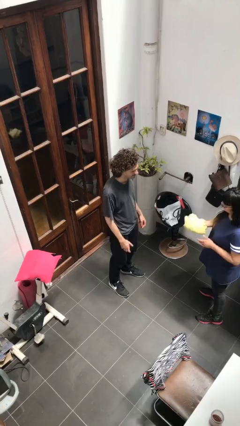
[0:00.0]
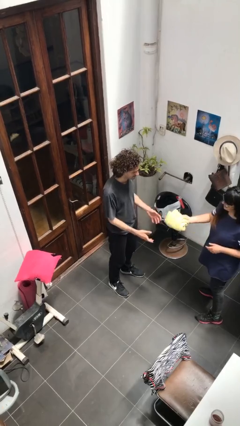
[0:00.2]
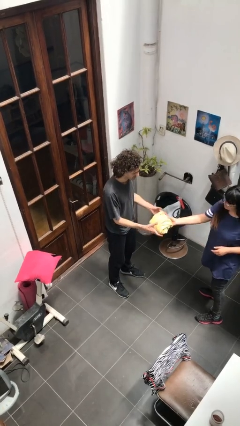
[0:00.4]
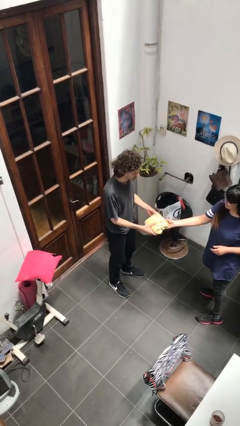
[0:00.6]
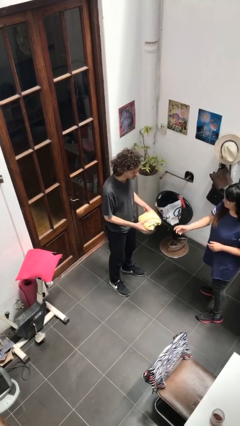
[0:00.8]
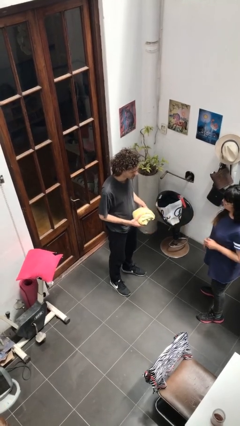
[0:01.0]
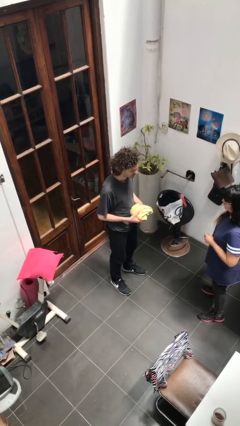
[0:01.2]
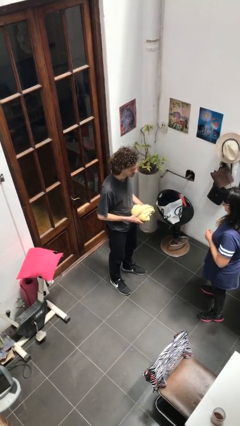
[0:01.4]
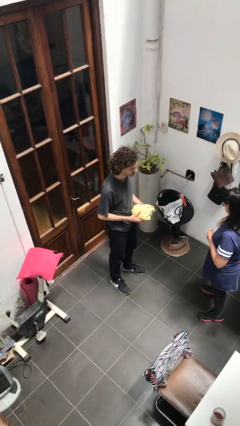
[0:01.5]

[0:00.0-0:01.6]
person transfers object to person

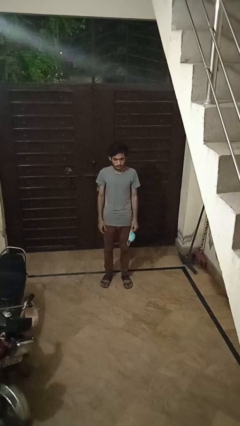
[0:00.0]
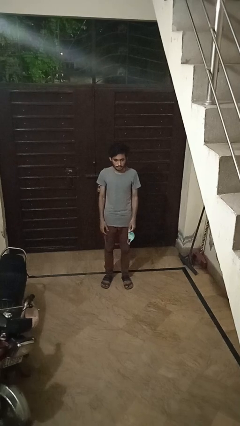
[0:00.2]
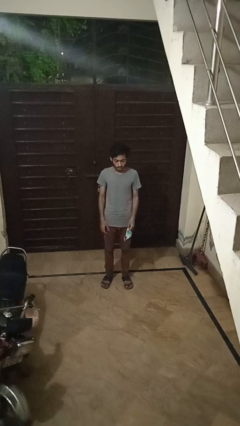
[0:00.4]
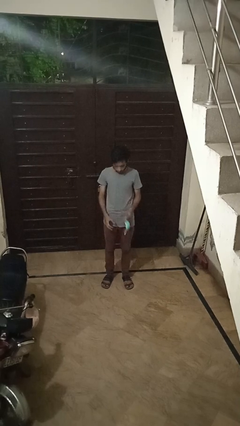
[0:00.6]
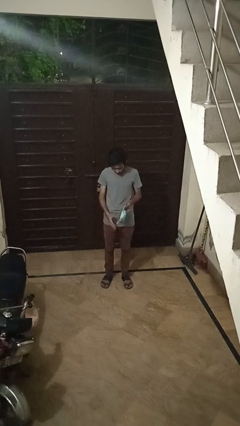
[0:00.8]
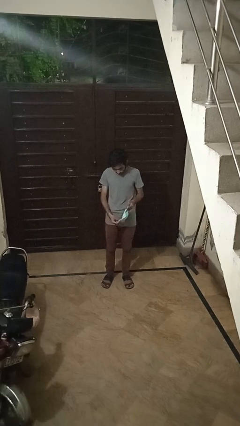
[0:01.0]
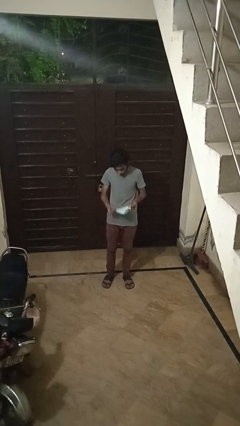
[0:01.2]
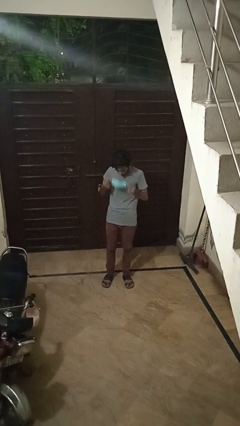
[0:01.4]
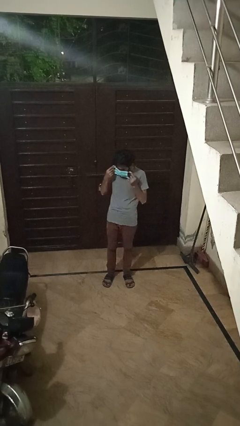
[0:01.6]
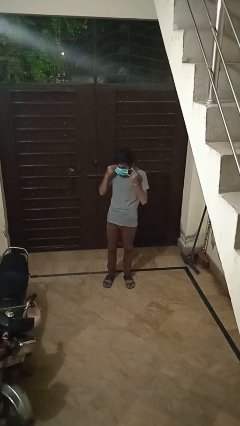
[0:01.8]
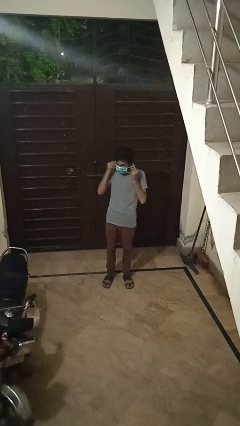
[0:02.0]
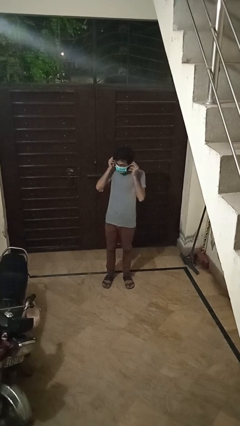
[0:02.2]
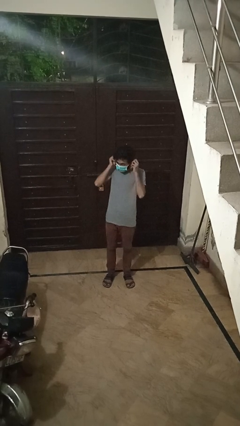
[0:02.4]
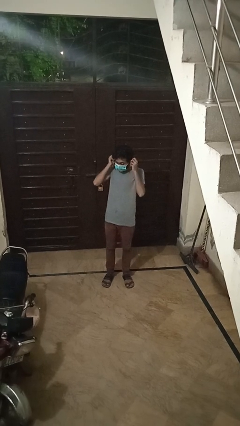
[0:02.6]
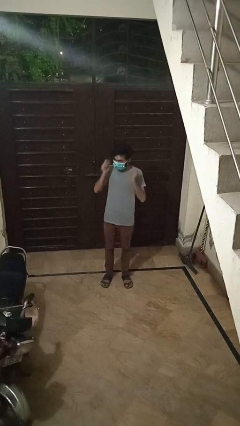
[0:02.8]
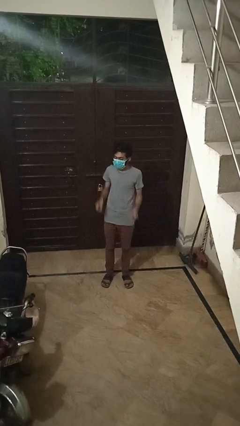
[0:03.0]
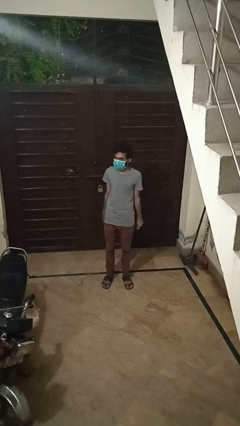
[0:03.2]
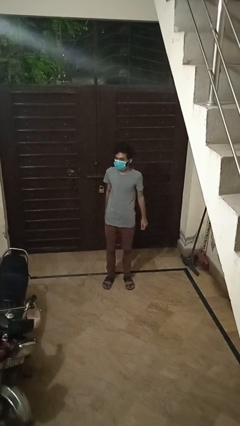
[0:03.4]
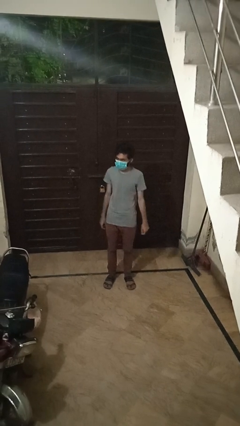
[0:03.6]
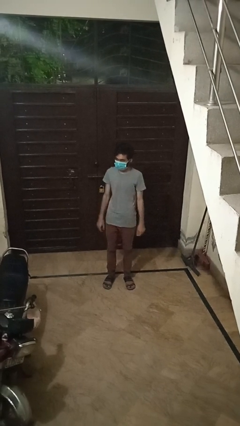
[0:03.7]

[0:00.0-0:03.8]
person puts on facemask

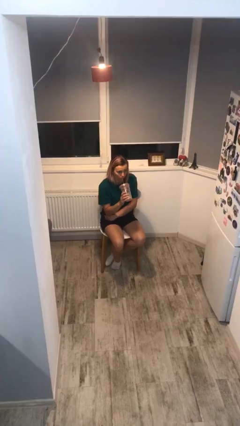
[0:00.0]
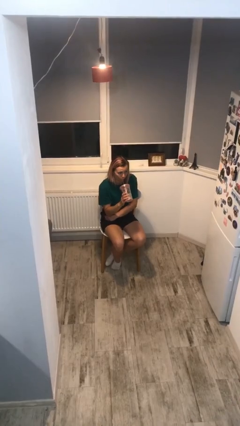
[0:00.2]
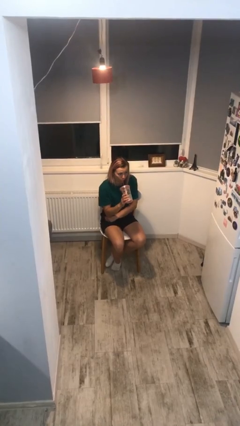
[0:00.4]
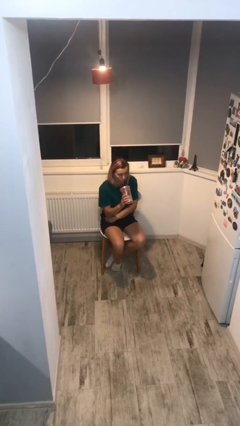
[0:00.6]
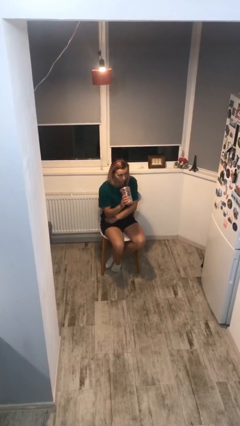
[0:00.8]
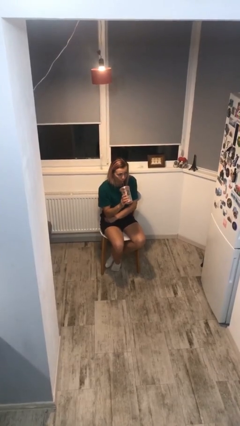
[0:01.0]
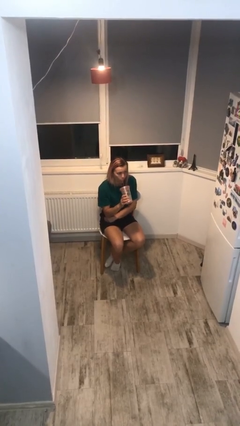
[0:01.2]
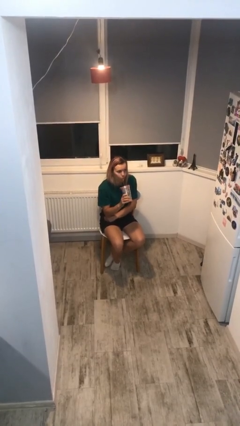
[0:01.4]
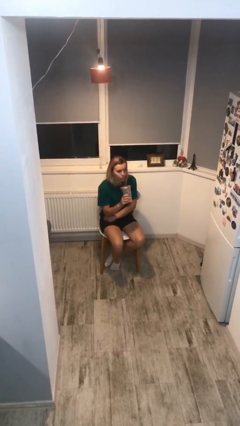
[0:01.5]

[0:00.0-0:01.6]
person drinks from straw

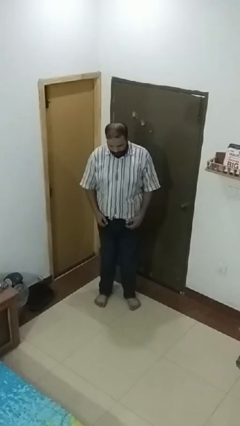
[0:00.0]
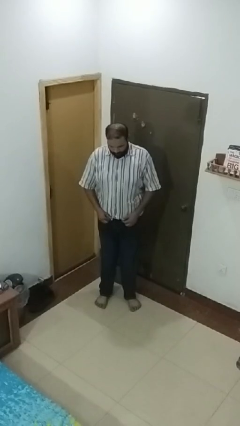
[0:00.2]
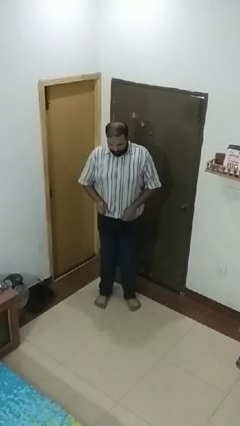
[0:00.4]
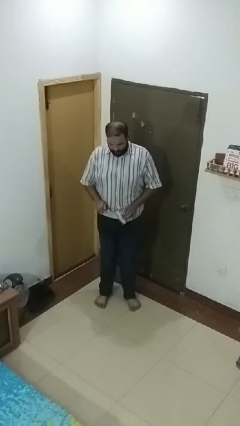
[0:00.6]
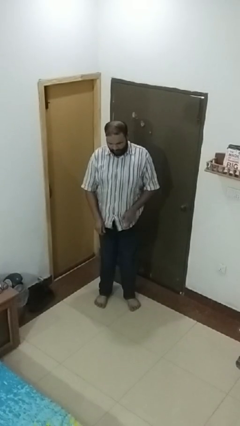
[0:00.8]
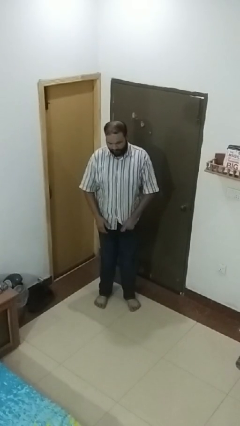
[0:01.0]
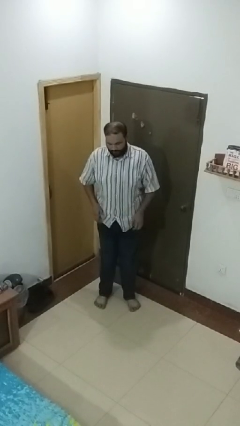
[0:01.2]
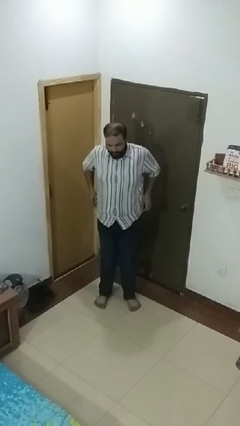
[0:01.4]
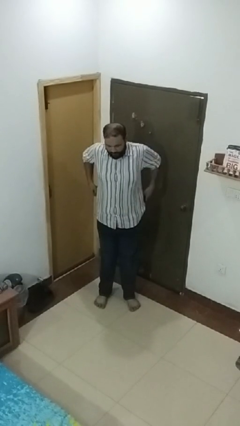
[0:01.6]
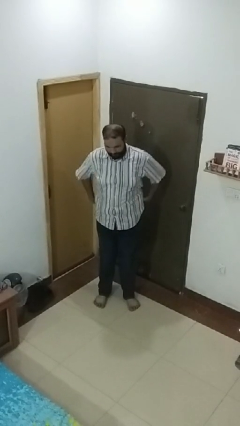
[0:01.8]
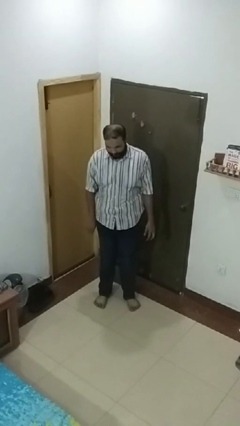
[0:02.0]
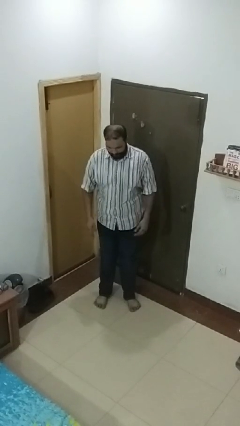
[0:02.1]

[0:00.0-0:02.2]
person untucks shirt

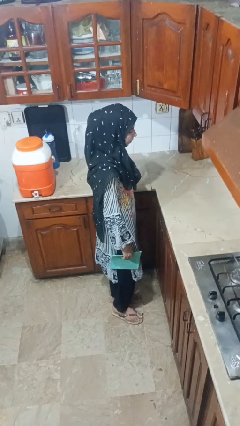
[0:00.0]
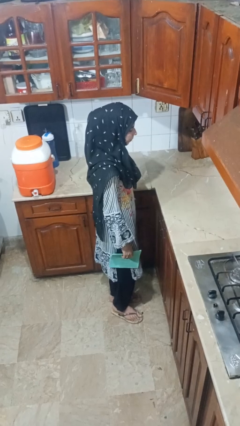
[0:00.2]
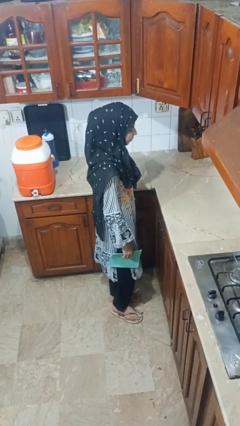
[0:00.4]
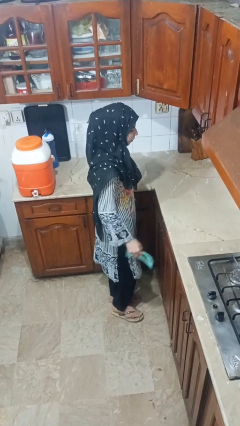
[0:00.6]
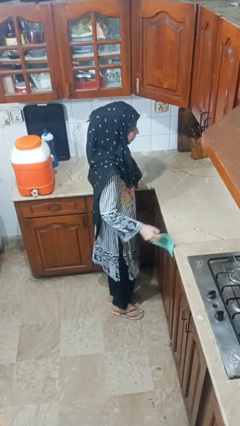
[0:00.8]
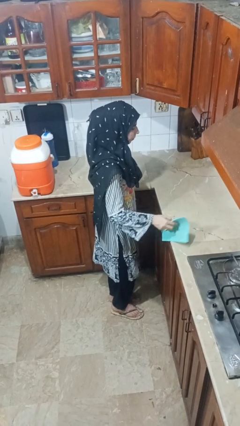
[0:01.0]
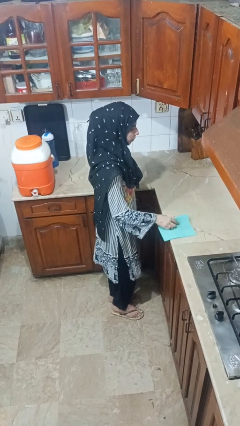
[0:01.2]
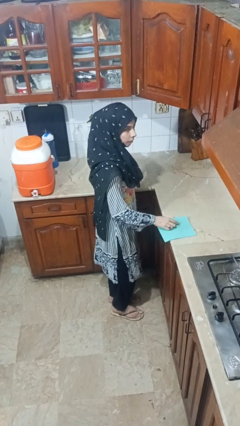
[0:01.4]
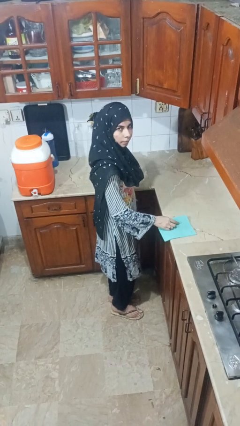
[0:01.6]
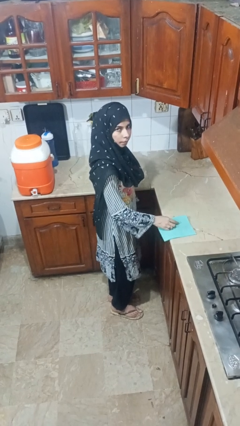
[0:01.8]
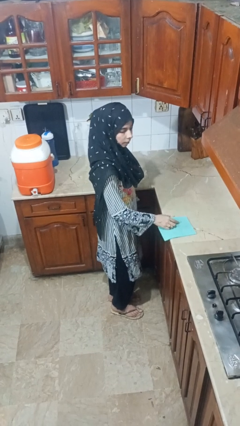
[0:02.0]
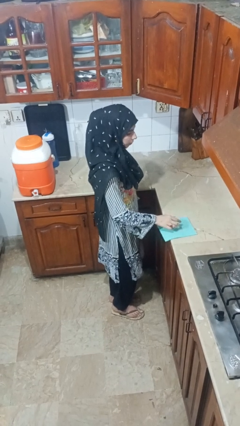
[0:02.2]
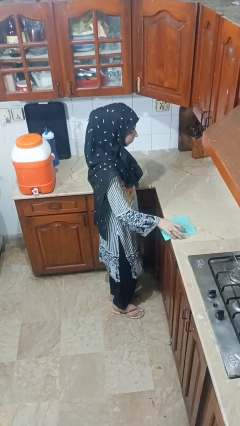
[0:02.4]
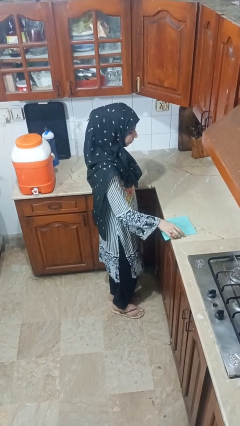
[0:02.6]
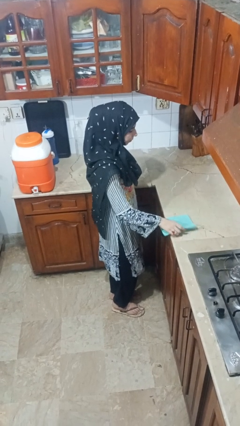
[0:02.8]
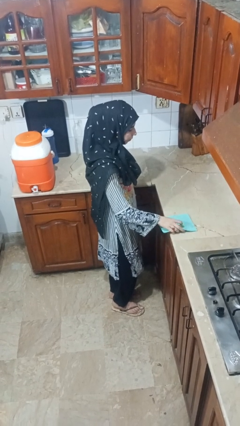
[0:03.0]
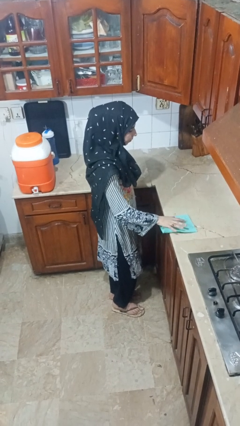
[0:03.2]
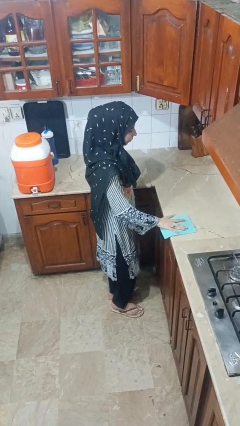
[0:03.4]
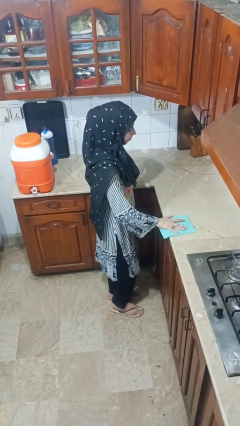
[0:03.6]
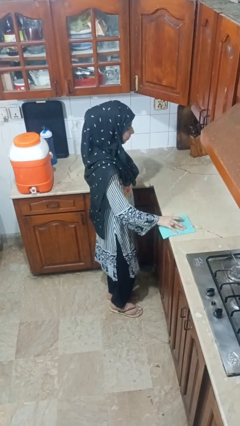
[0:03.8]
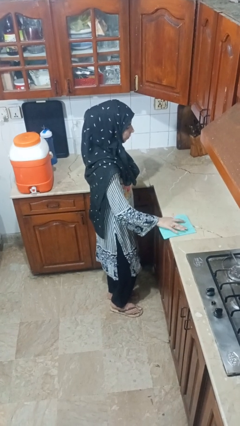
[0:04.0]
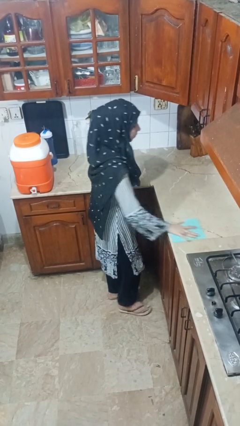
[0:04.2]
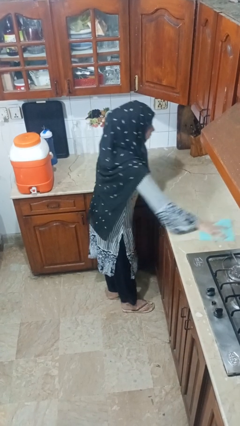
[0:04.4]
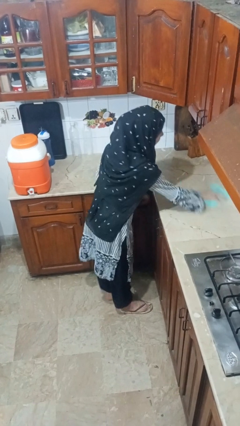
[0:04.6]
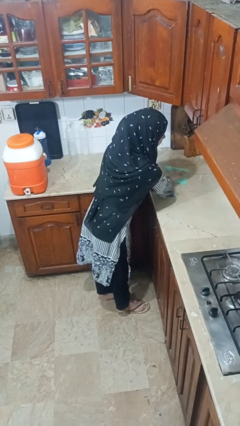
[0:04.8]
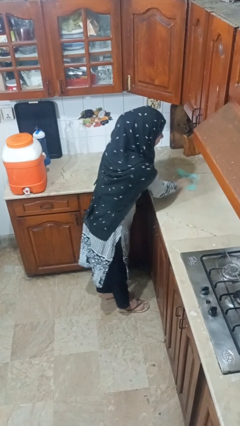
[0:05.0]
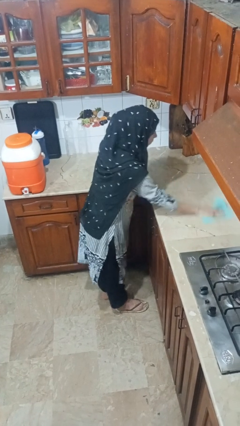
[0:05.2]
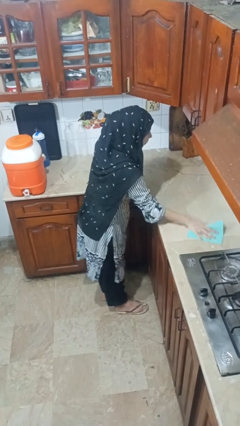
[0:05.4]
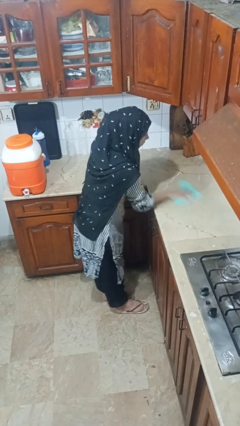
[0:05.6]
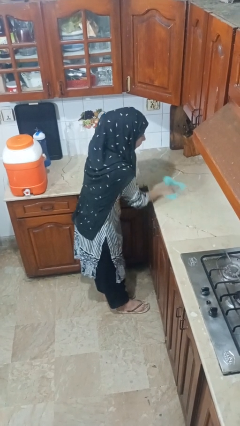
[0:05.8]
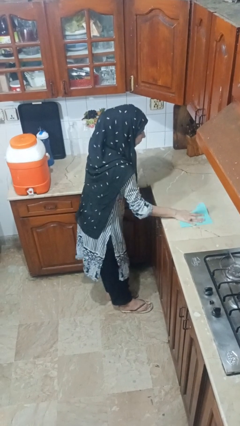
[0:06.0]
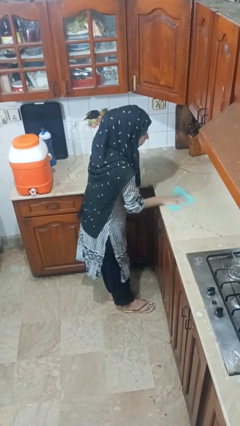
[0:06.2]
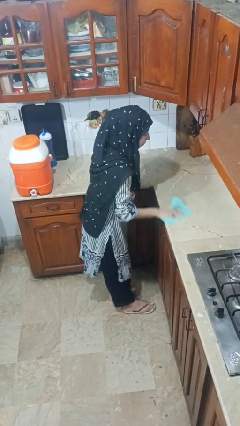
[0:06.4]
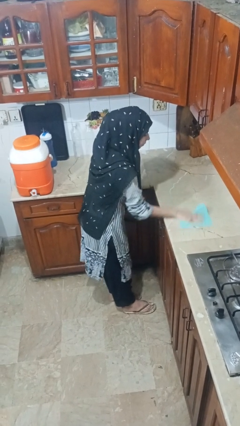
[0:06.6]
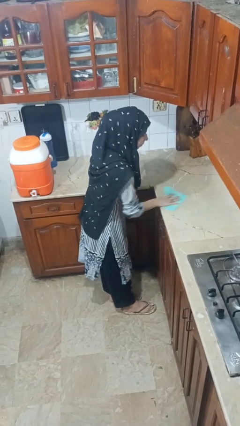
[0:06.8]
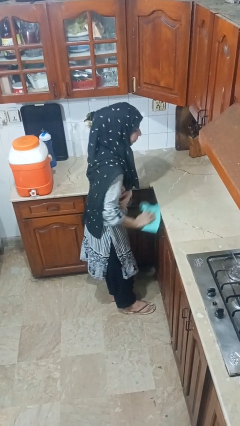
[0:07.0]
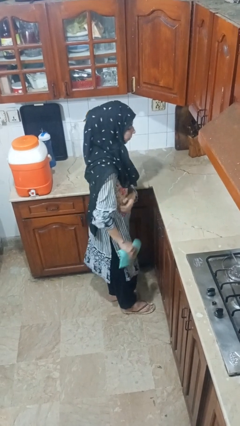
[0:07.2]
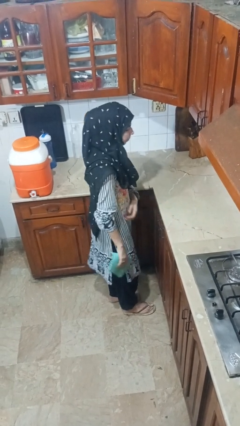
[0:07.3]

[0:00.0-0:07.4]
person cleans table with rag

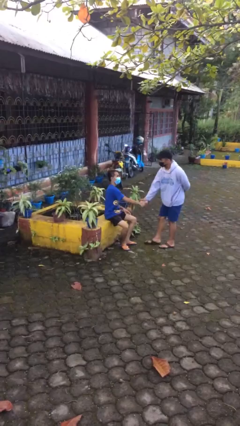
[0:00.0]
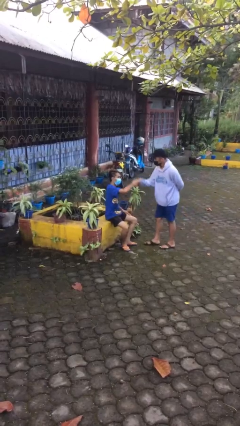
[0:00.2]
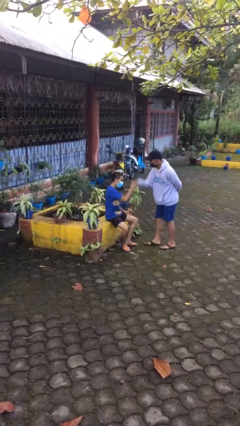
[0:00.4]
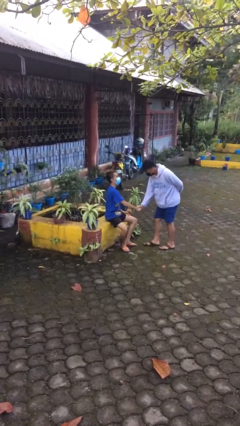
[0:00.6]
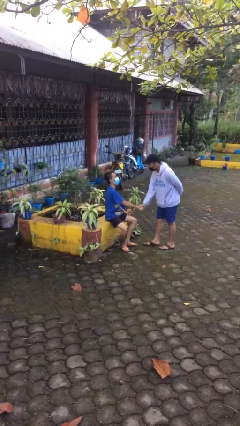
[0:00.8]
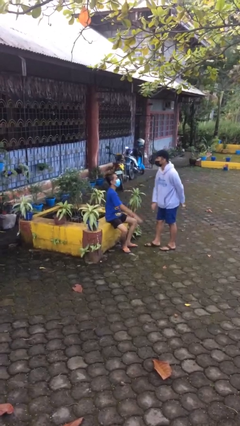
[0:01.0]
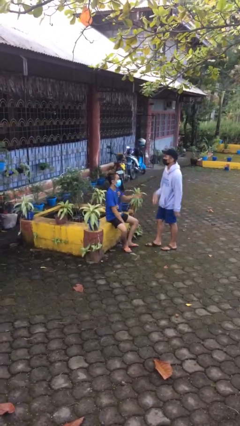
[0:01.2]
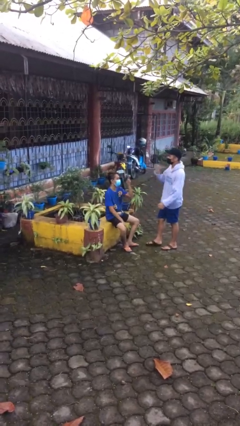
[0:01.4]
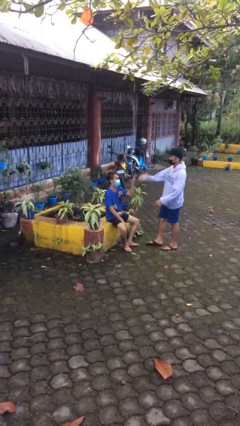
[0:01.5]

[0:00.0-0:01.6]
person shakes hand
